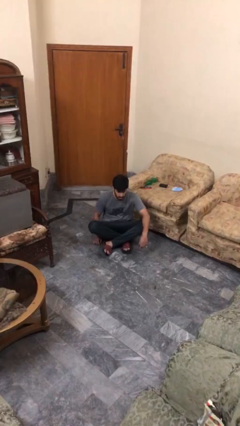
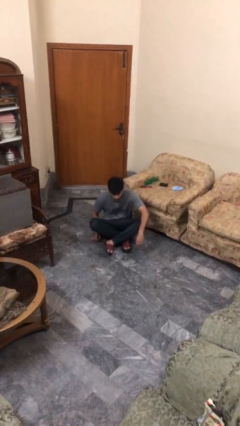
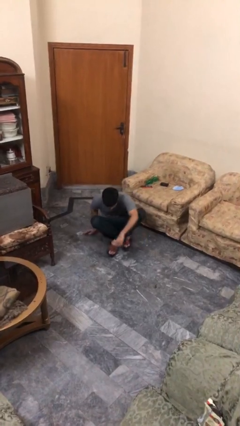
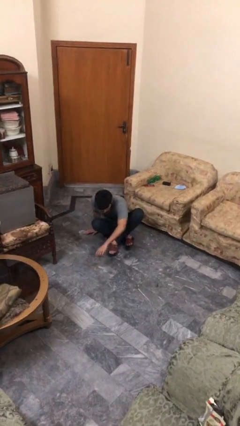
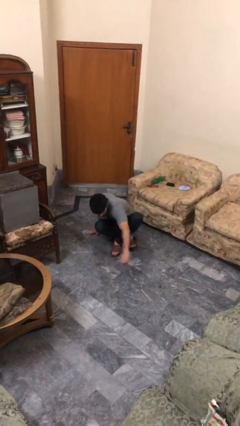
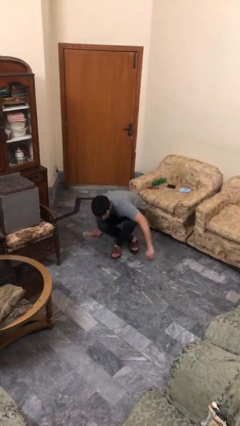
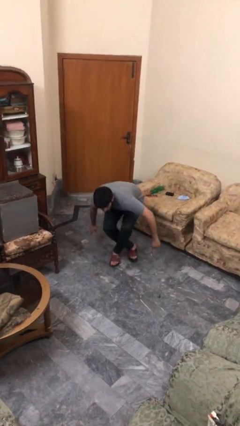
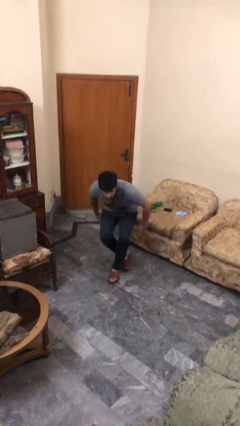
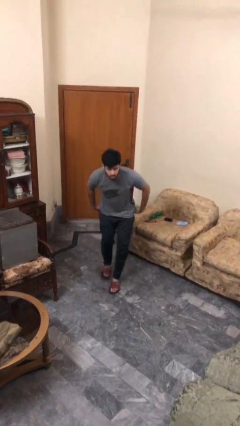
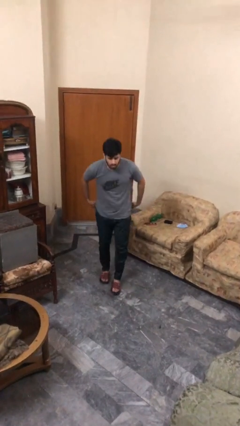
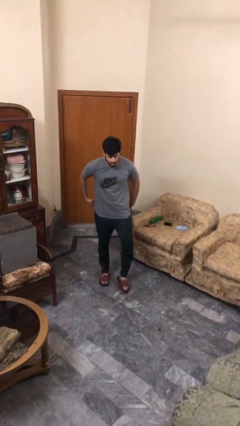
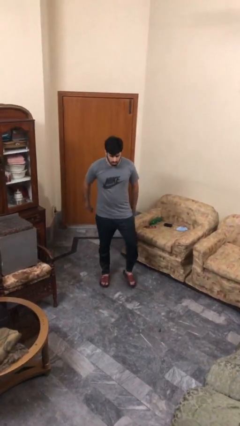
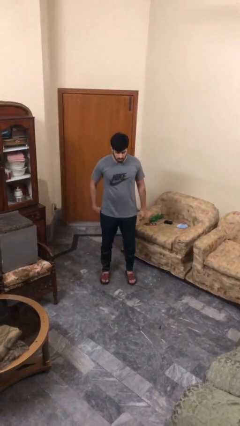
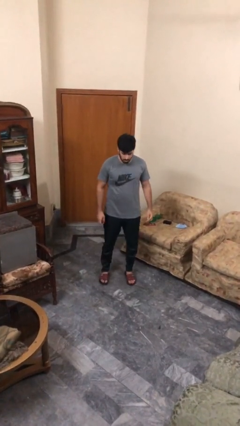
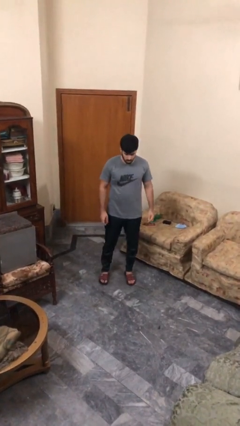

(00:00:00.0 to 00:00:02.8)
person stands up from floor

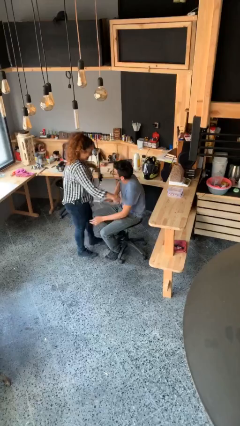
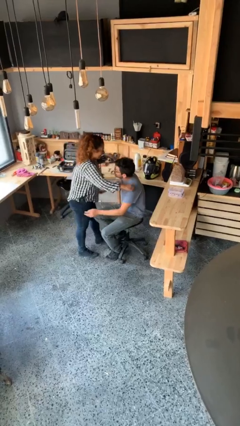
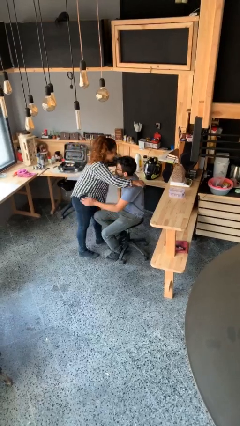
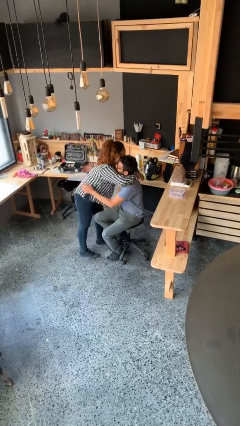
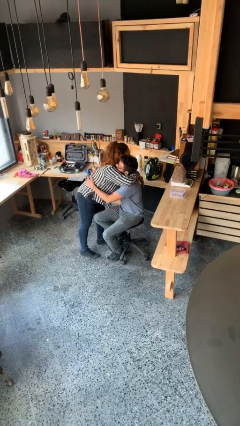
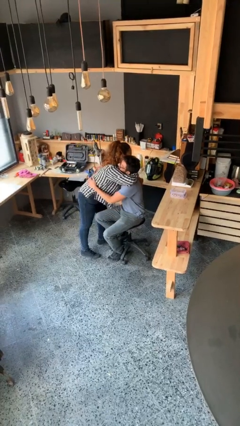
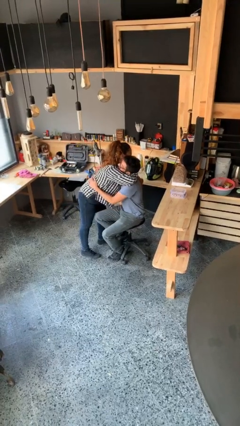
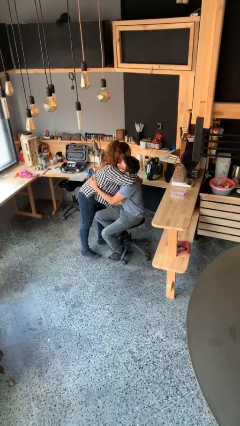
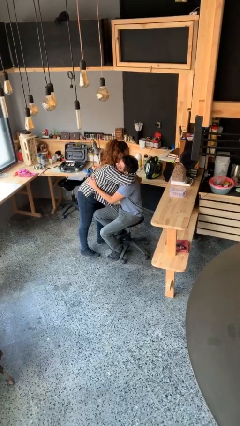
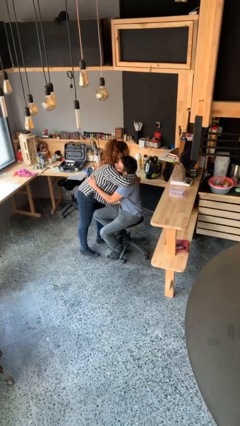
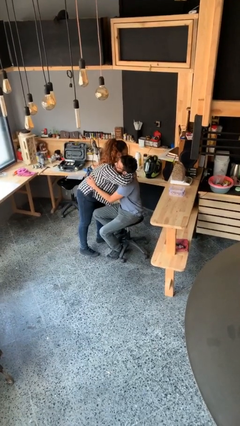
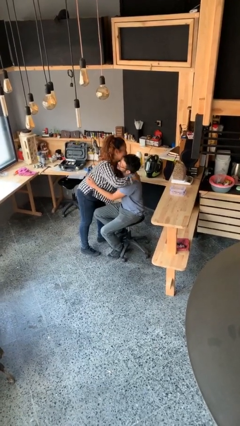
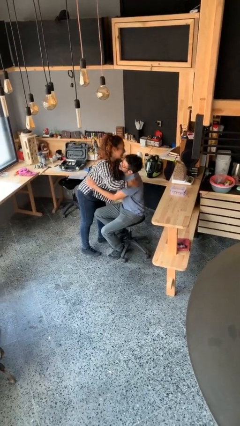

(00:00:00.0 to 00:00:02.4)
person embraces person

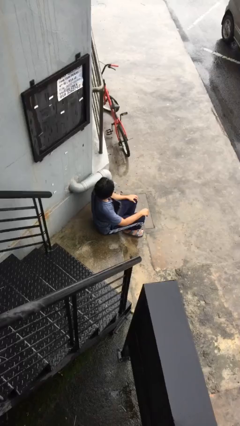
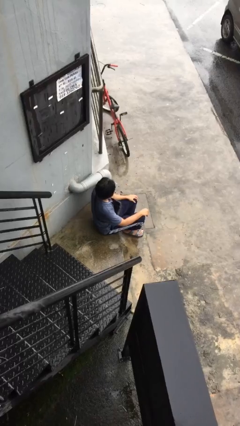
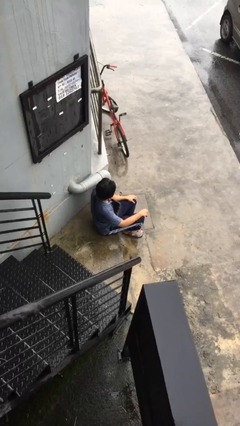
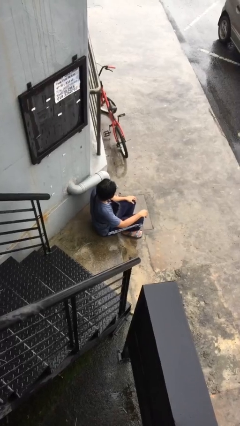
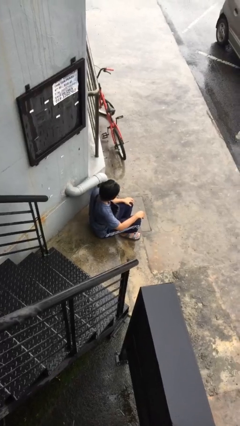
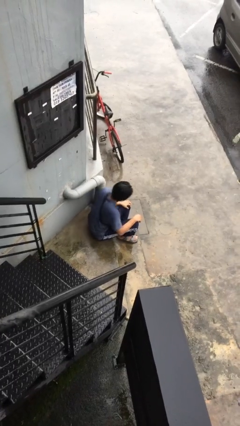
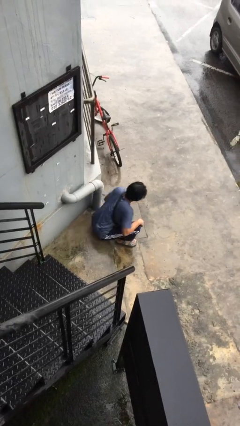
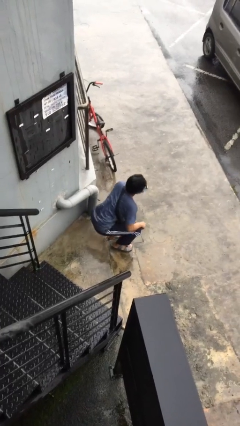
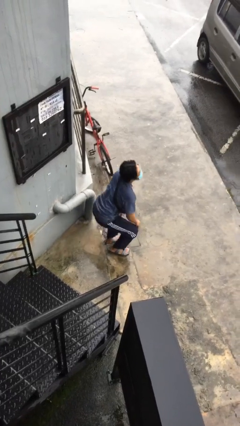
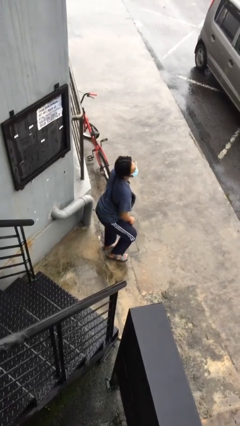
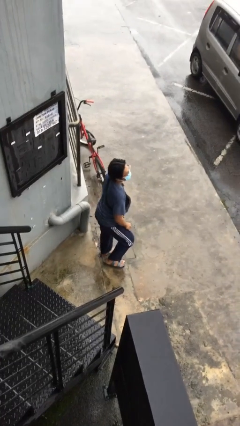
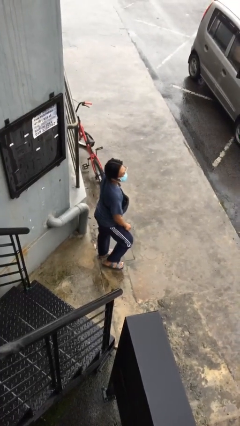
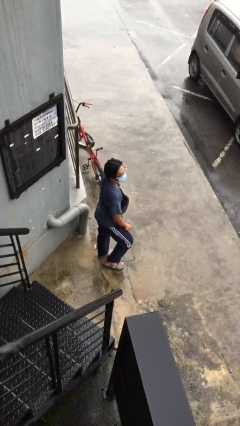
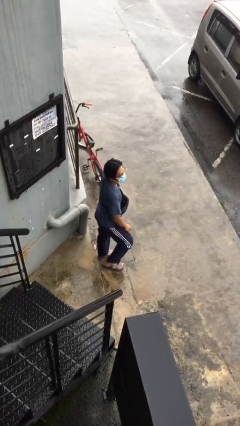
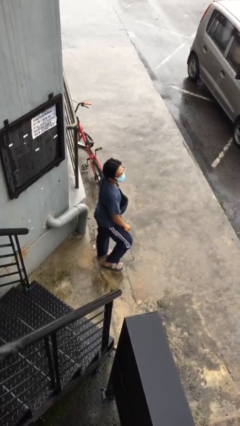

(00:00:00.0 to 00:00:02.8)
person stands up

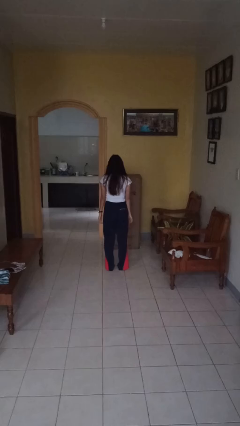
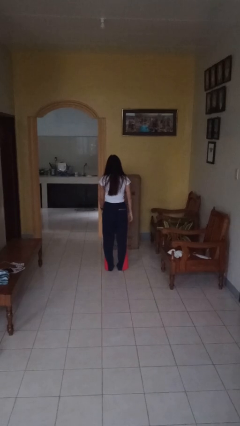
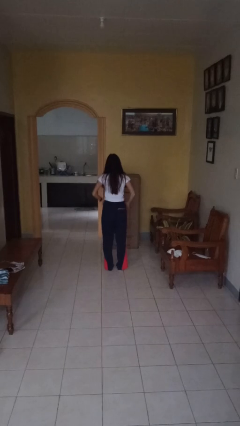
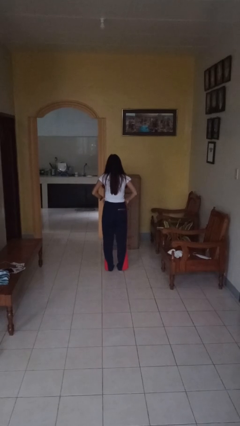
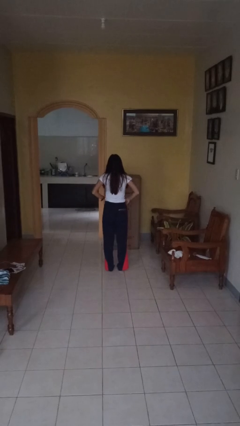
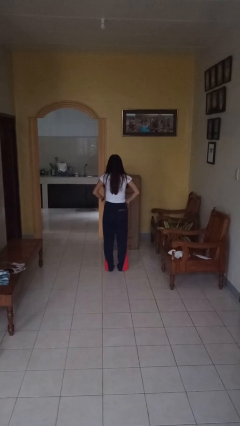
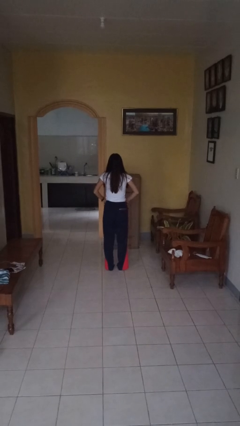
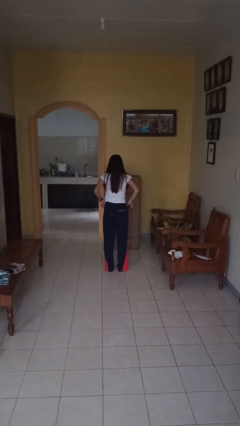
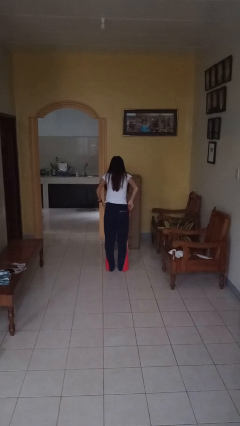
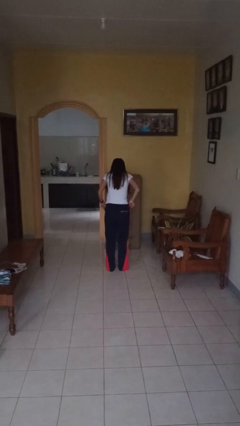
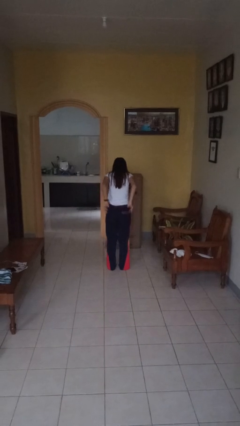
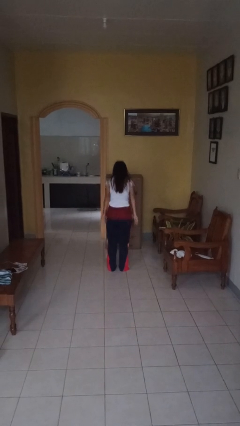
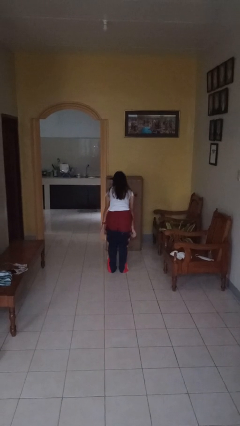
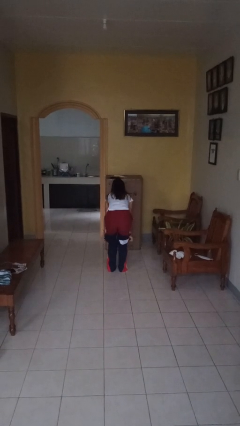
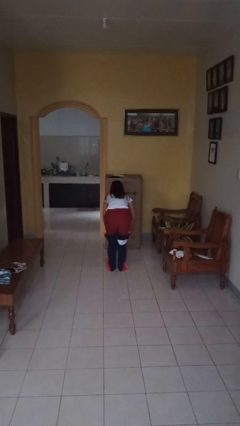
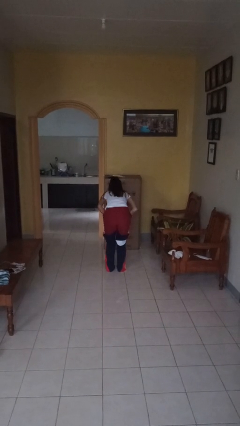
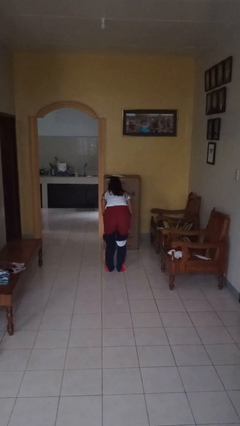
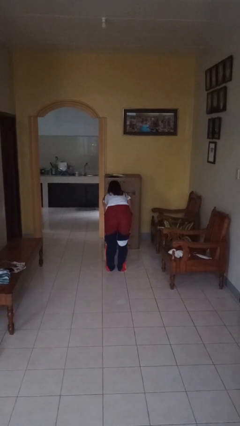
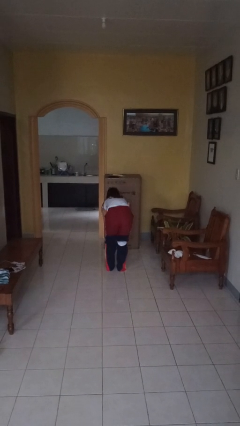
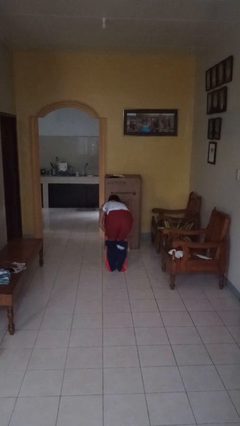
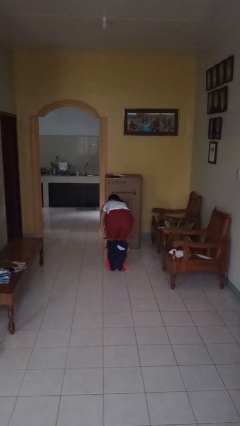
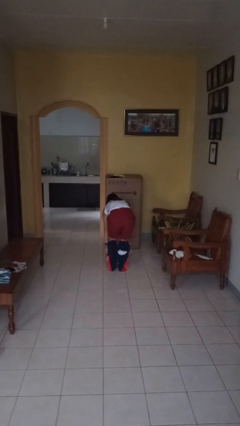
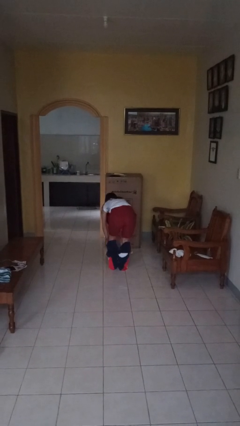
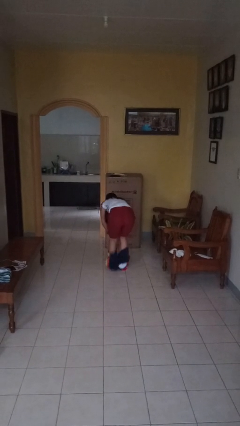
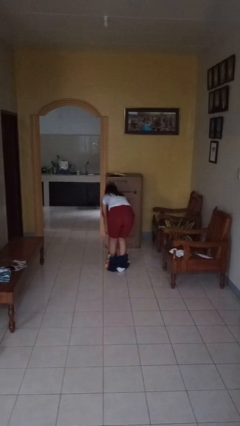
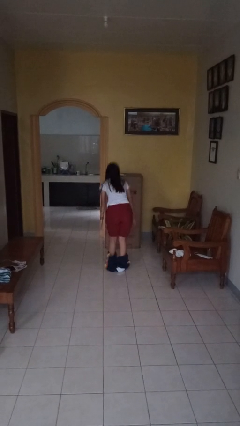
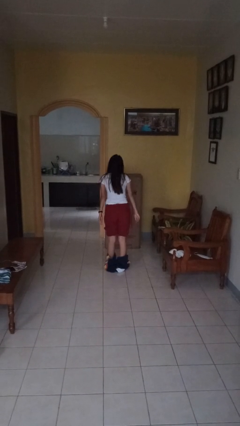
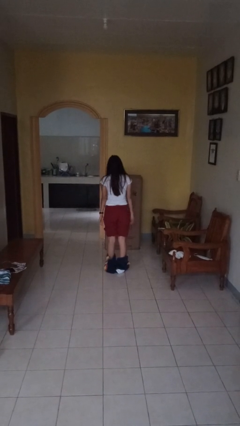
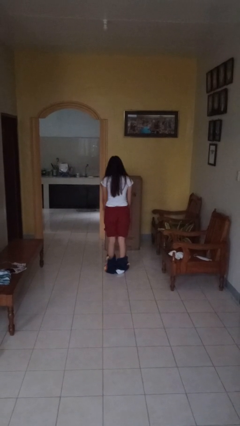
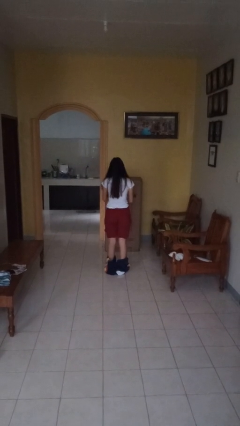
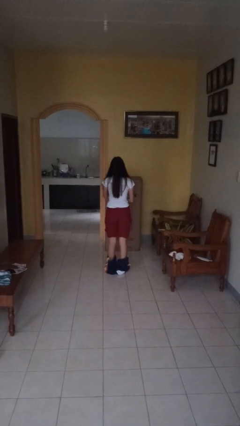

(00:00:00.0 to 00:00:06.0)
person takes off pants

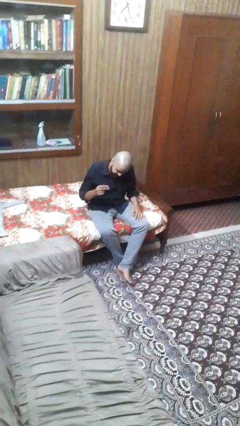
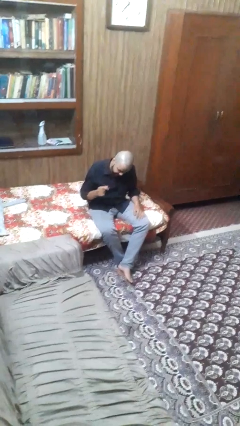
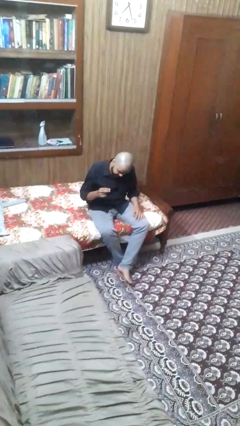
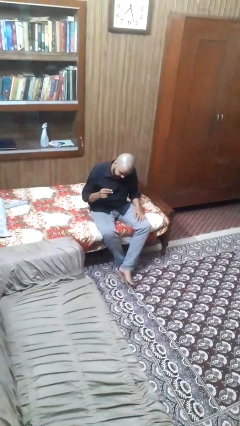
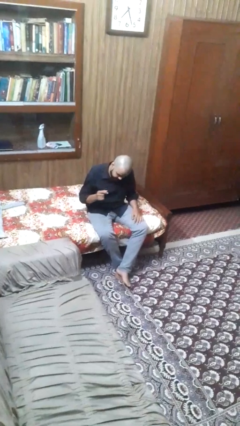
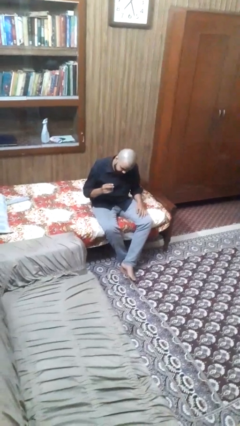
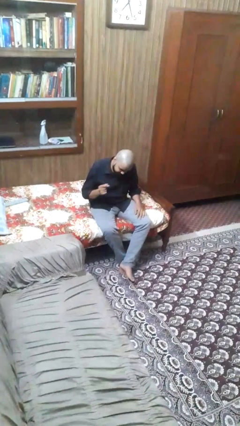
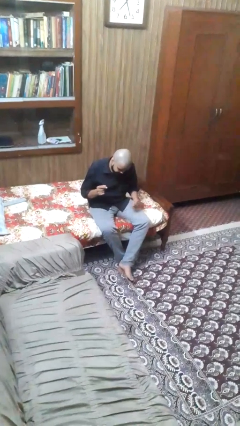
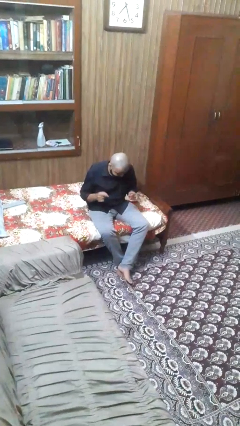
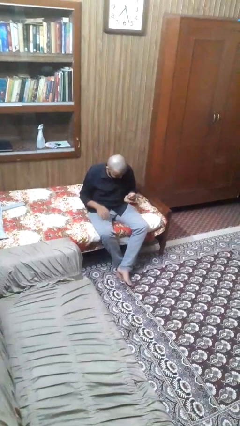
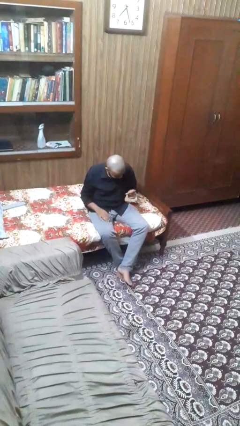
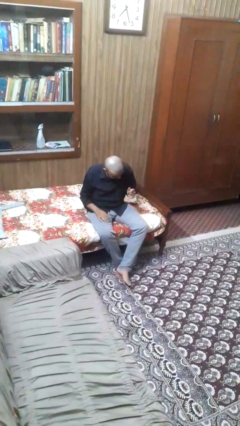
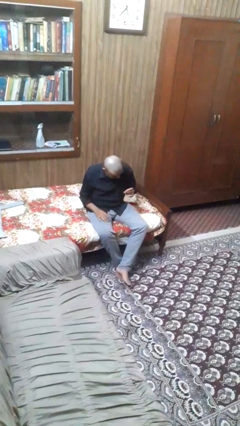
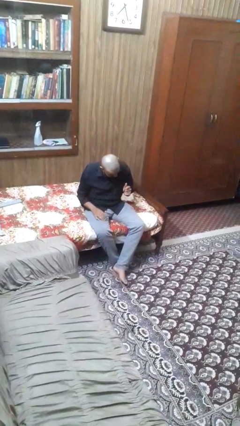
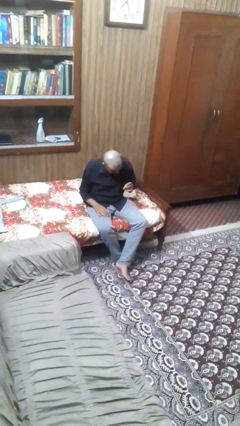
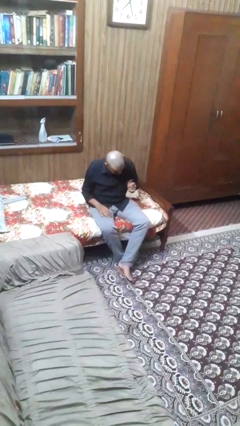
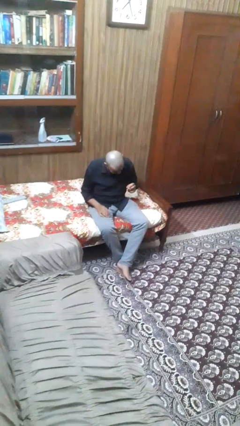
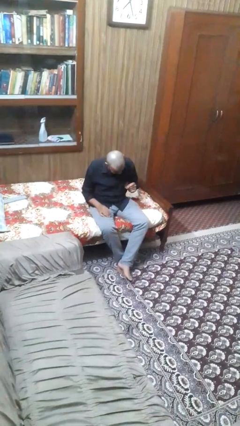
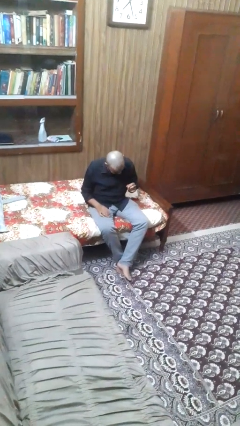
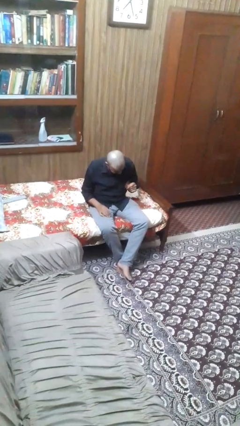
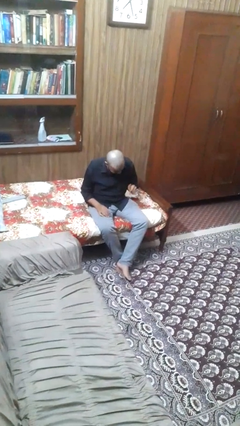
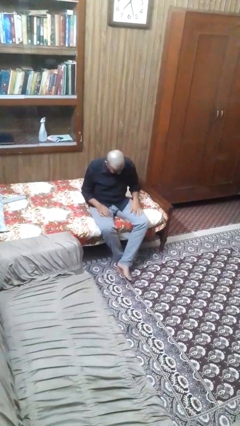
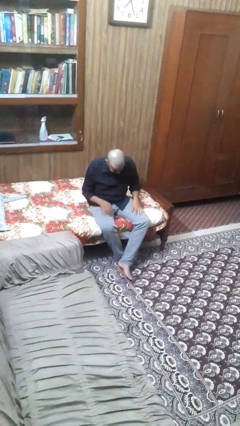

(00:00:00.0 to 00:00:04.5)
person snaps fingers
